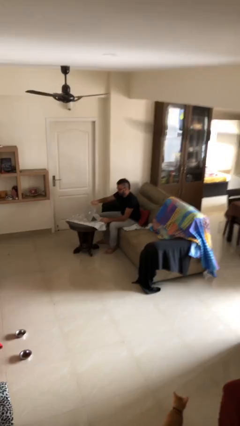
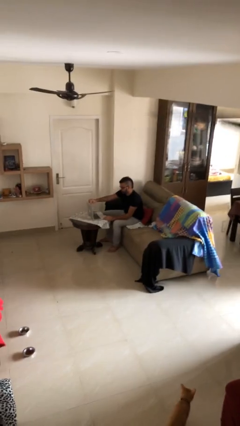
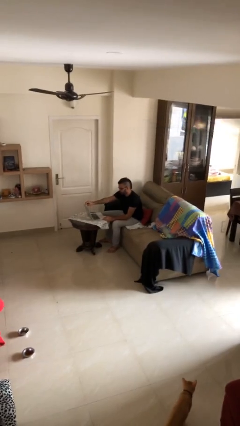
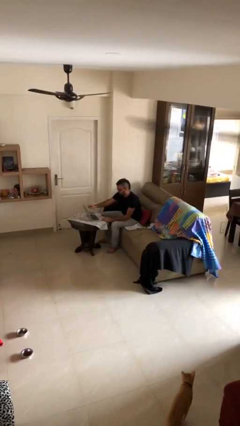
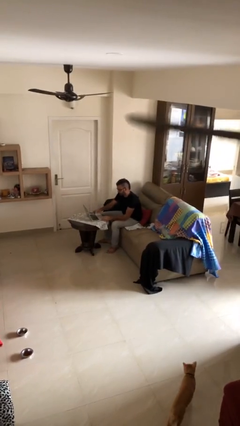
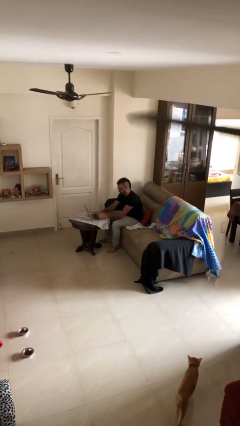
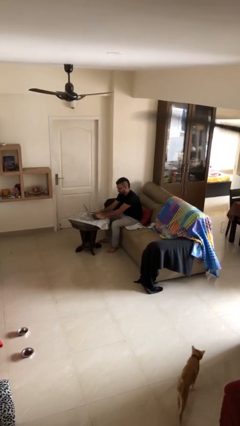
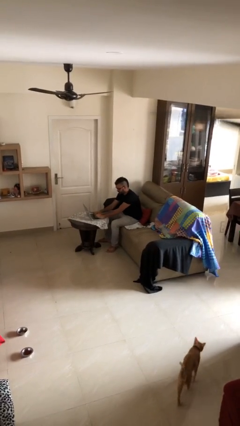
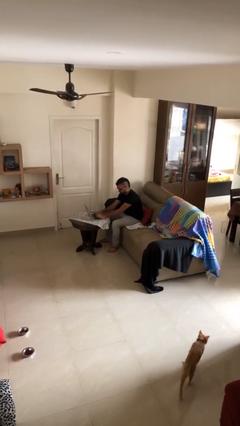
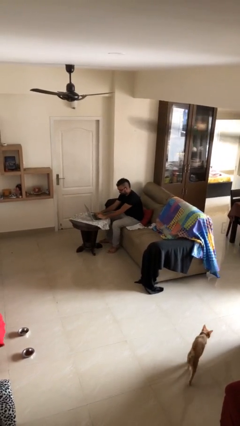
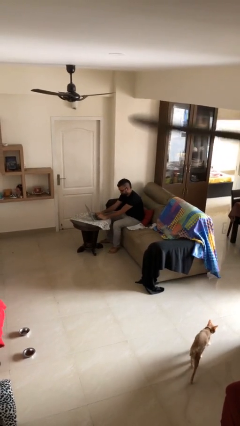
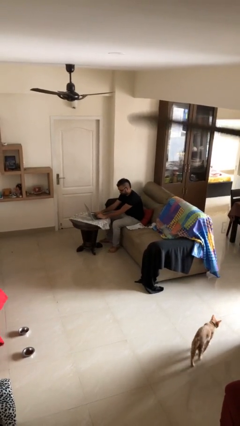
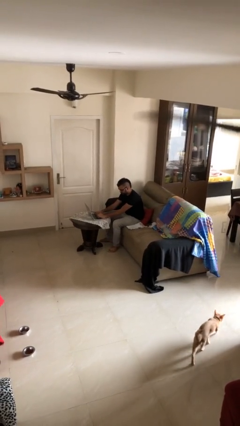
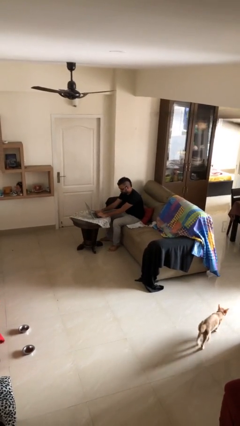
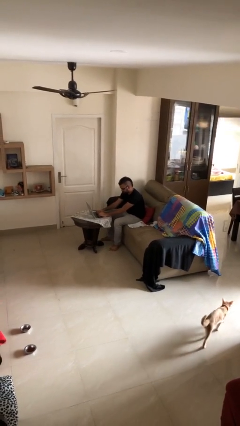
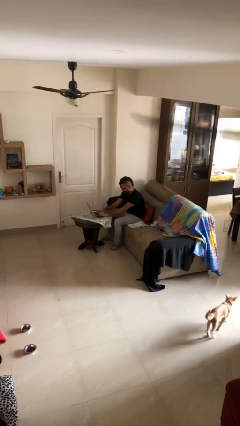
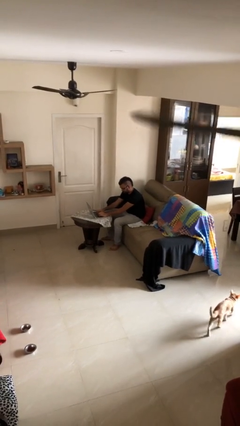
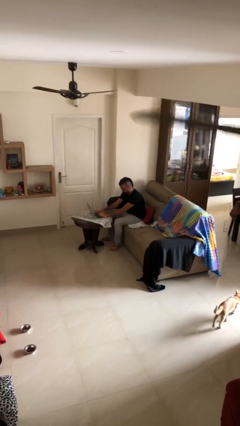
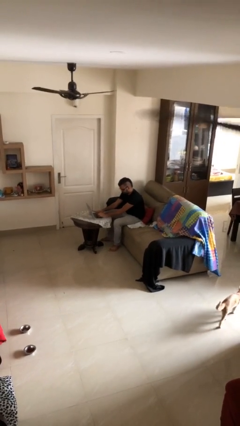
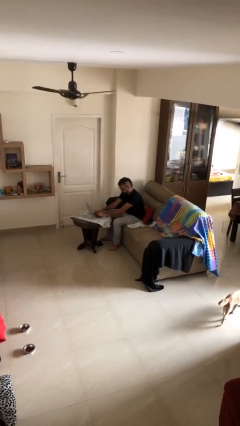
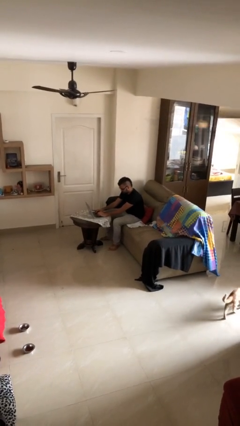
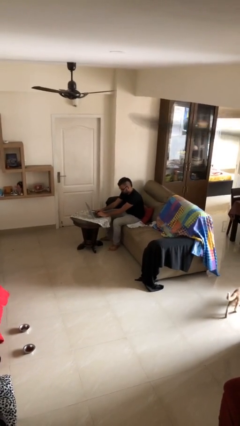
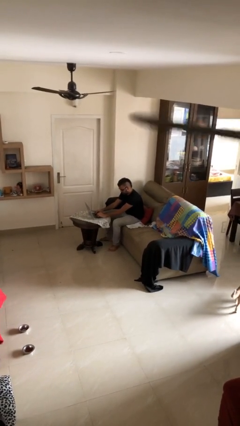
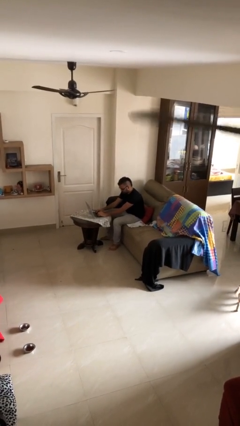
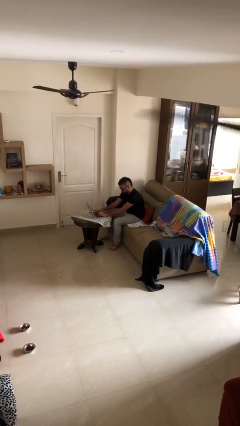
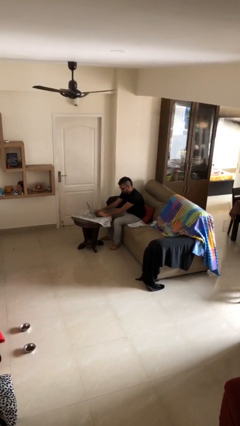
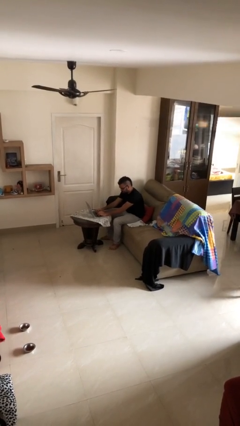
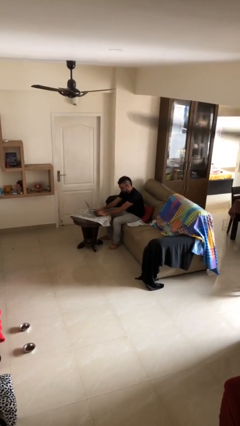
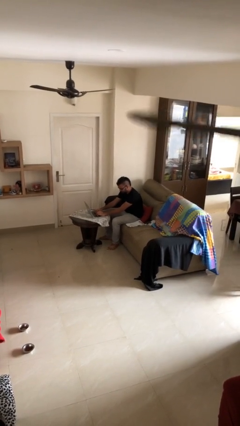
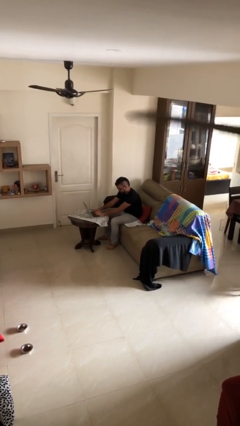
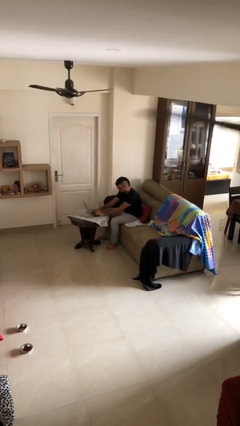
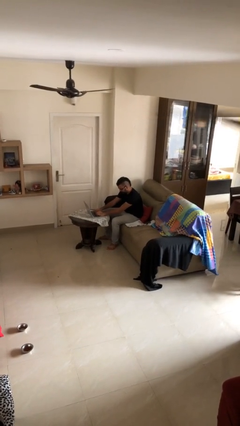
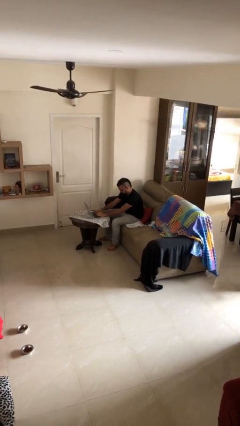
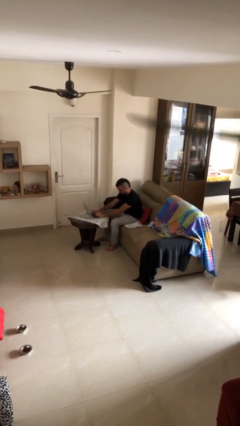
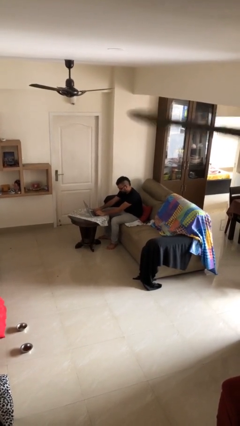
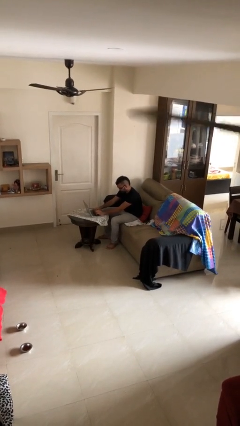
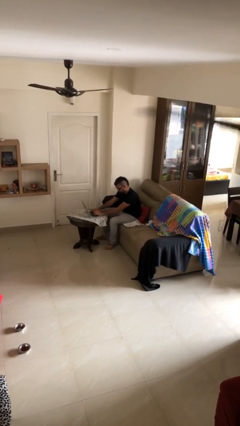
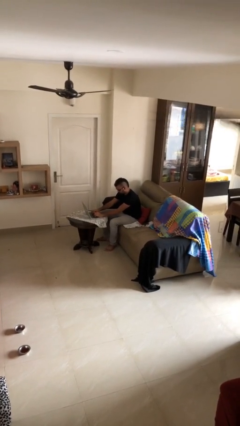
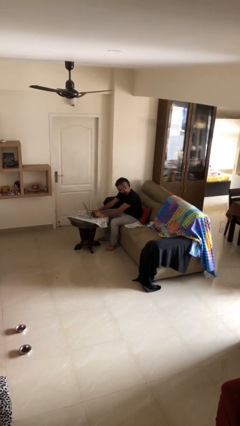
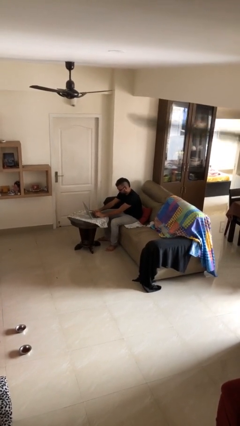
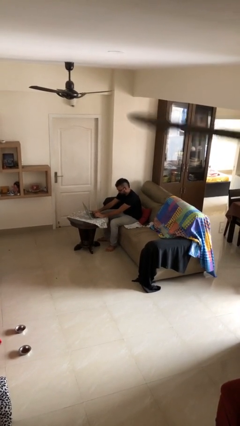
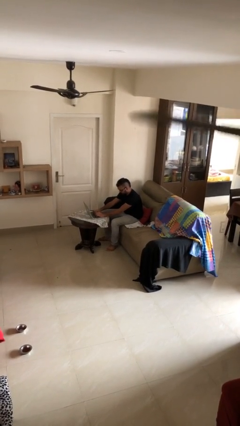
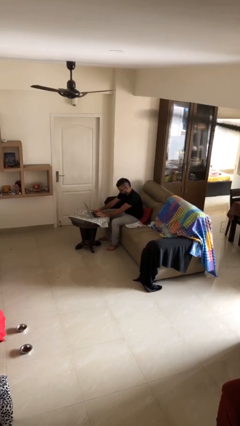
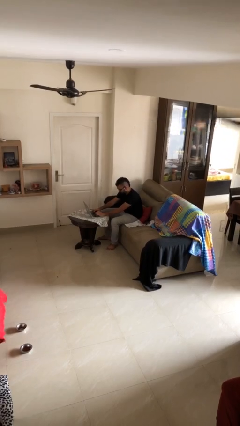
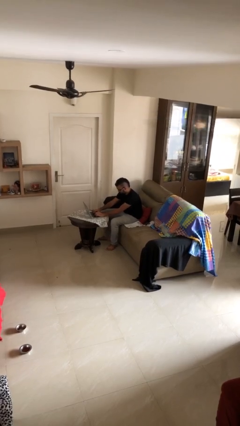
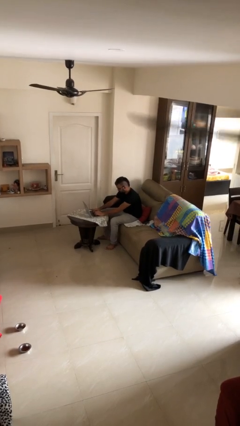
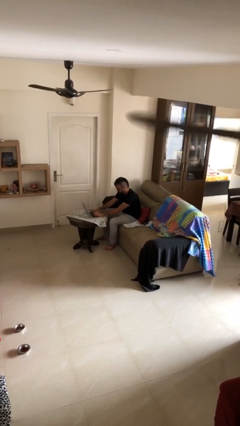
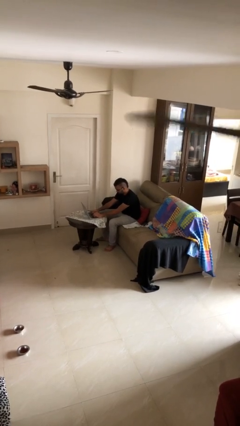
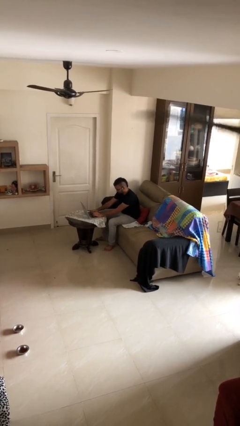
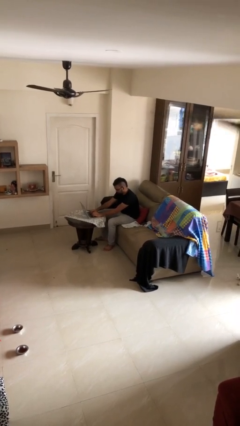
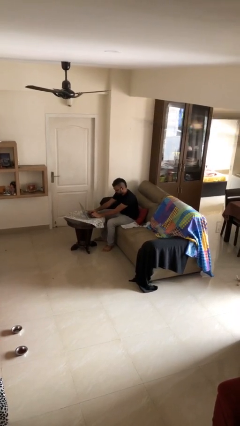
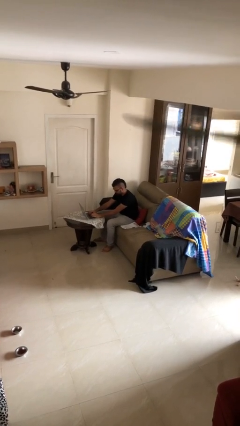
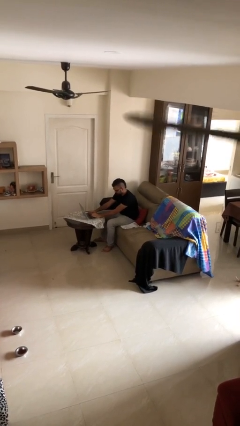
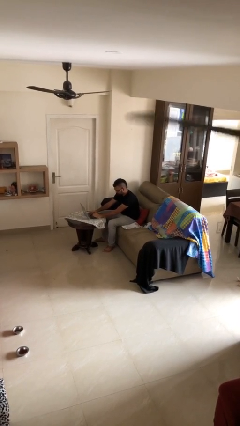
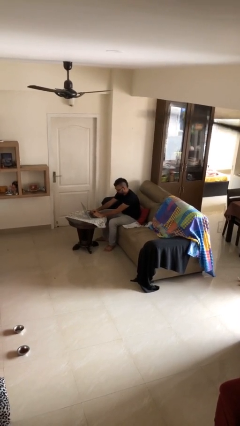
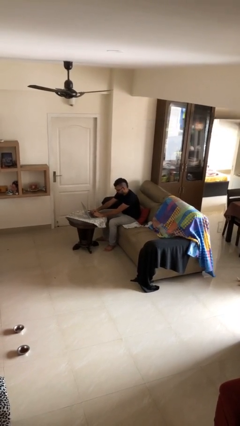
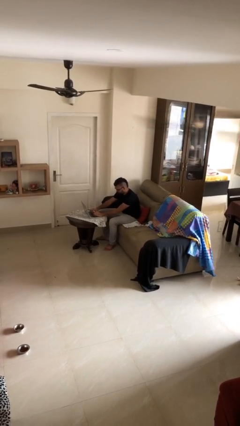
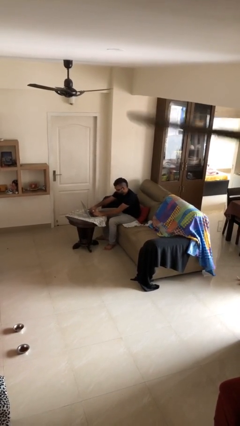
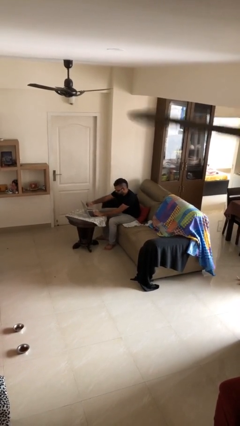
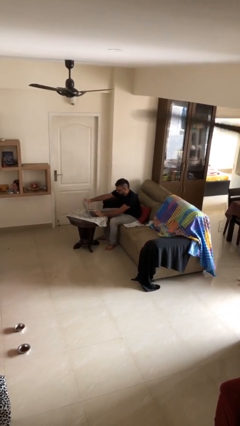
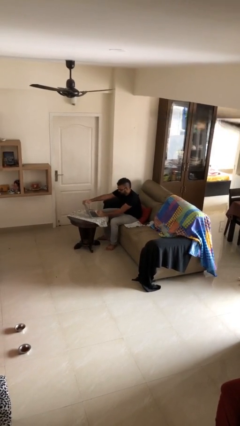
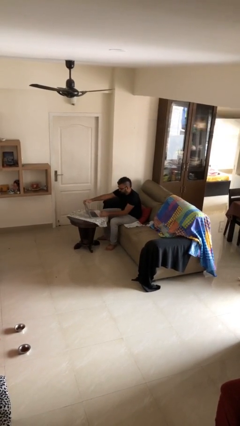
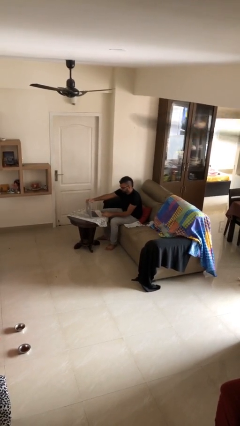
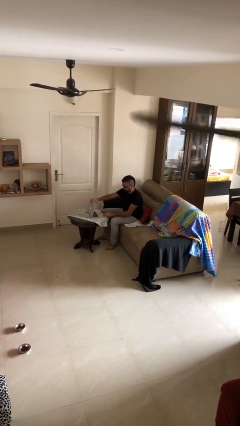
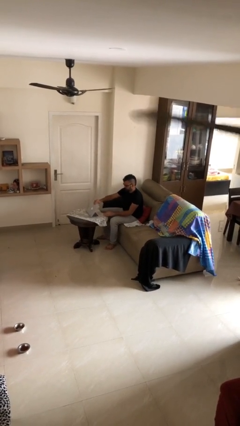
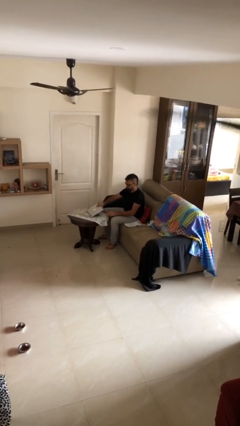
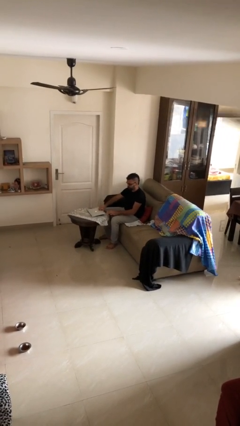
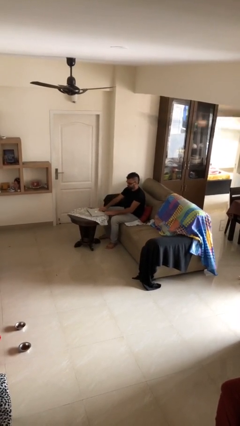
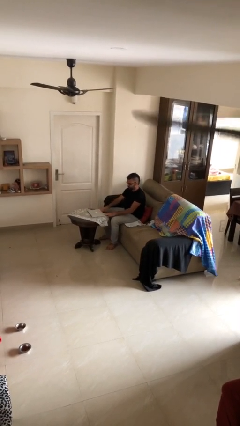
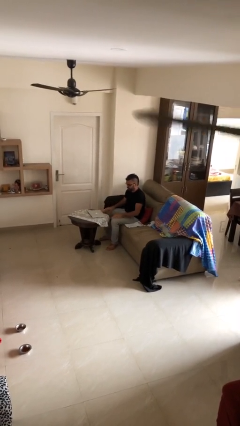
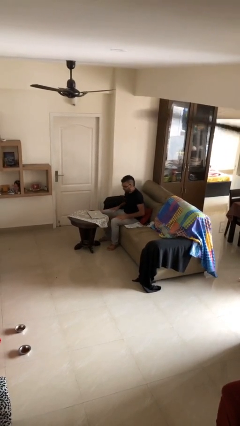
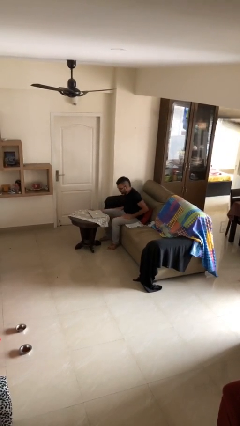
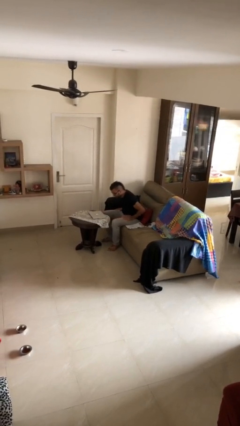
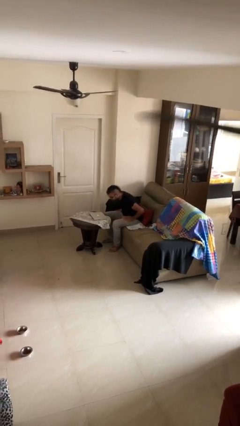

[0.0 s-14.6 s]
person interacts with laptop

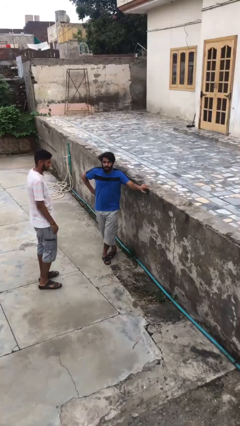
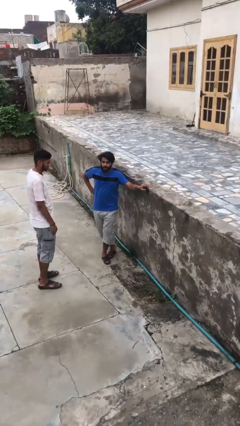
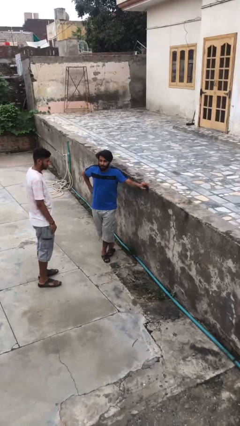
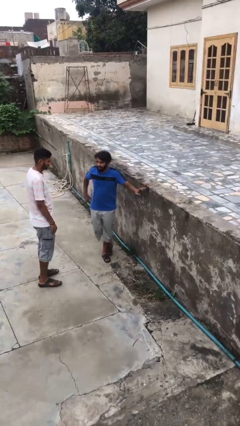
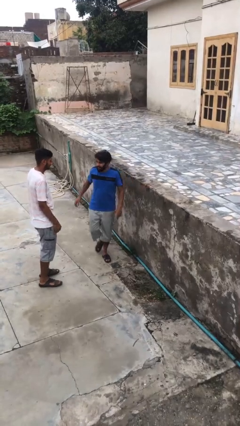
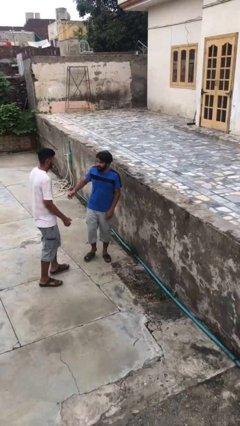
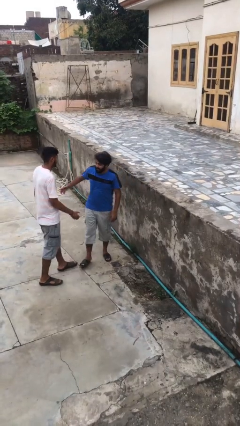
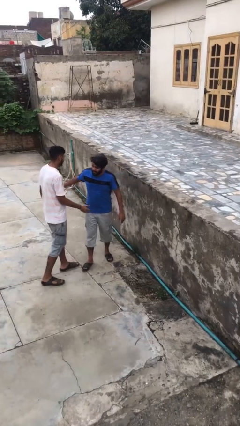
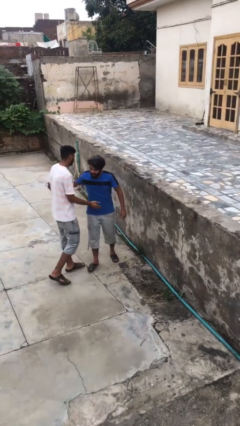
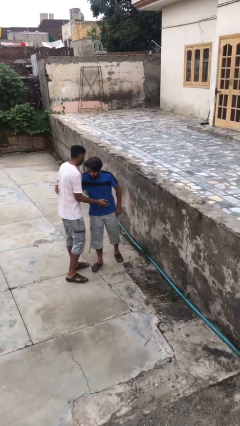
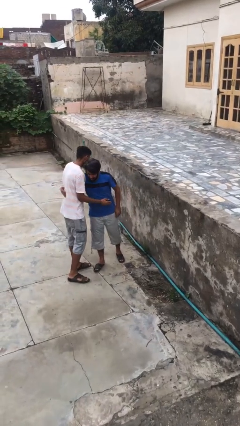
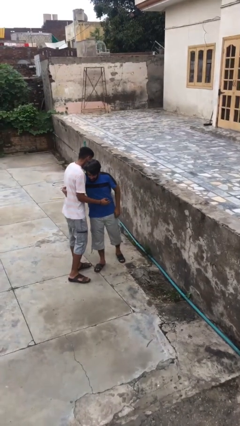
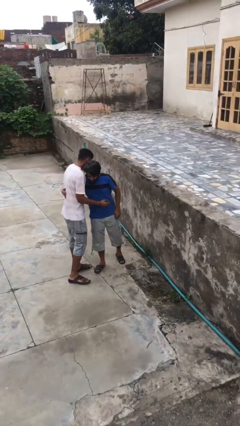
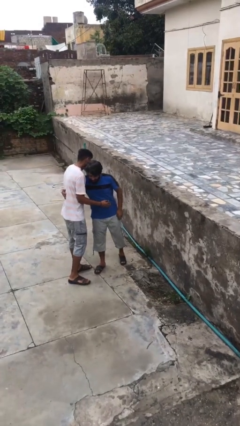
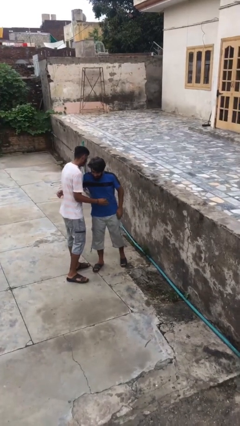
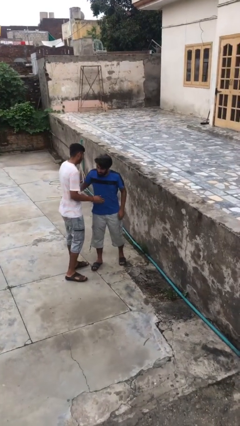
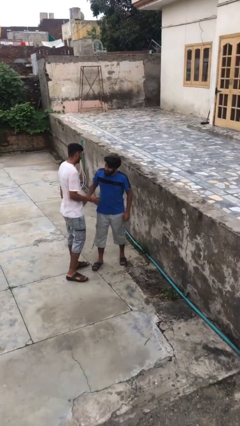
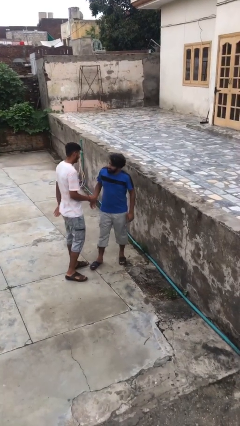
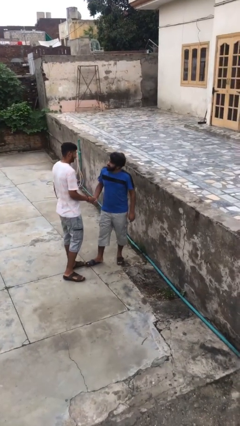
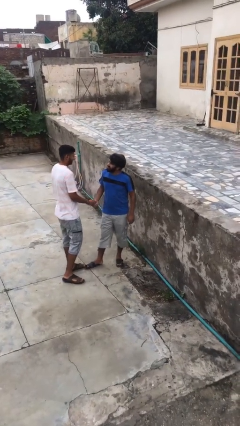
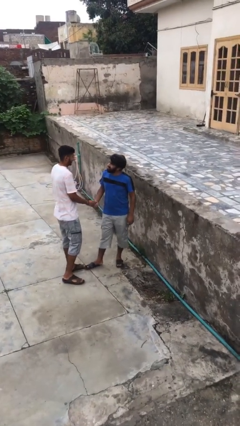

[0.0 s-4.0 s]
person embraces person
